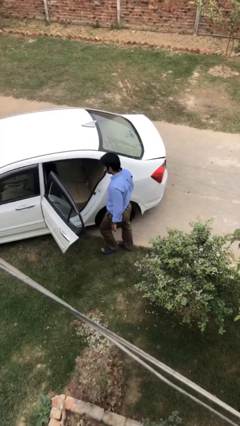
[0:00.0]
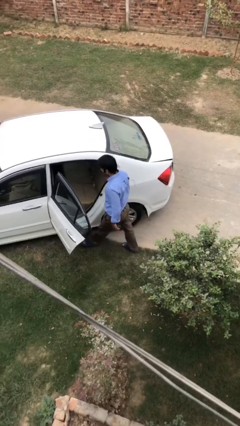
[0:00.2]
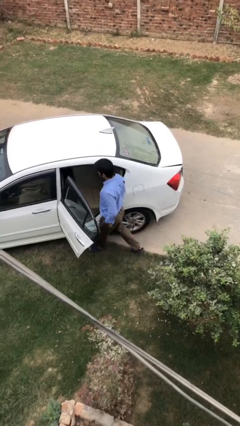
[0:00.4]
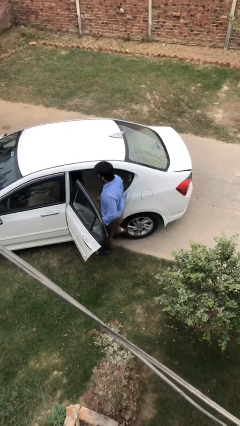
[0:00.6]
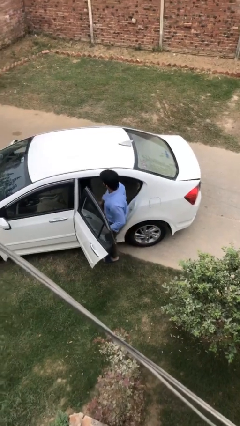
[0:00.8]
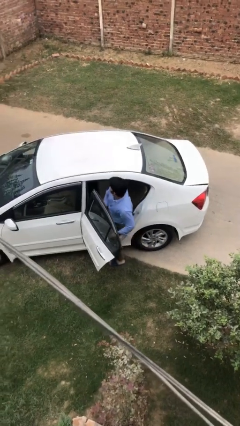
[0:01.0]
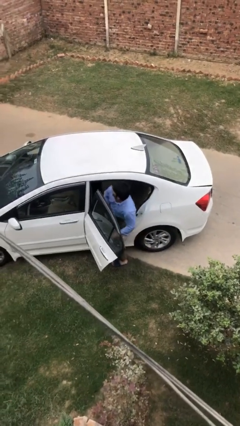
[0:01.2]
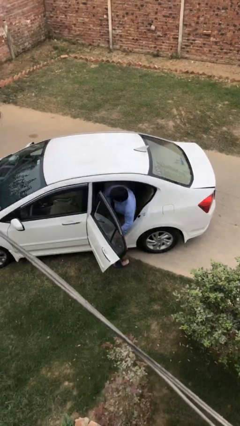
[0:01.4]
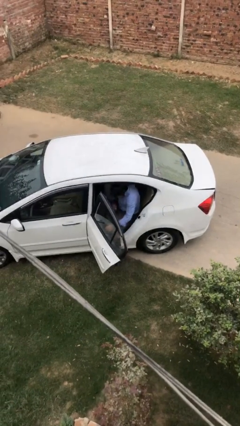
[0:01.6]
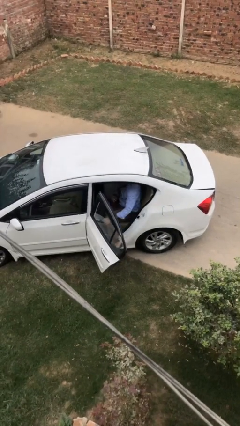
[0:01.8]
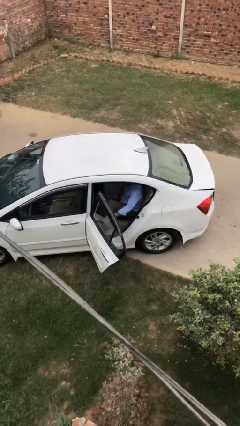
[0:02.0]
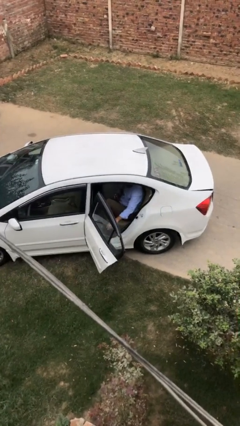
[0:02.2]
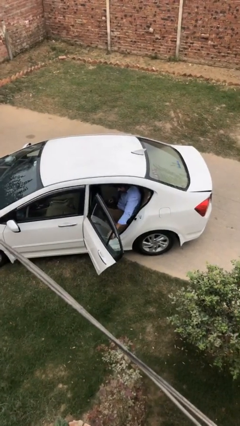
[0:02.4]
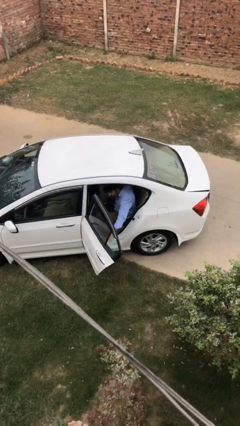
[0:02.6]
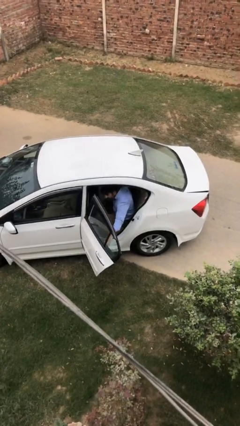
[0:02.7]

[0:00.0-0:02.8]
person enters car

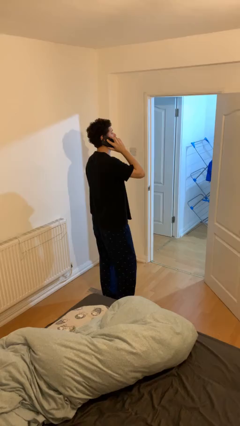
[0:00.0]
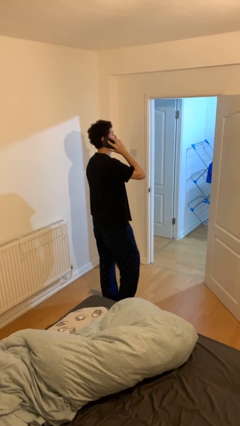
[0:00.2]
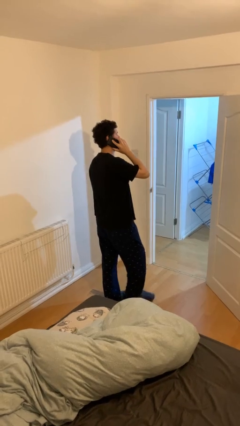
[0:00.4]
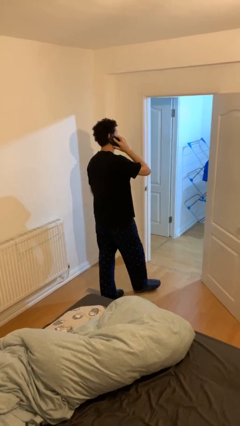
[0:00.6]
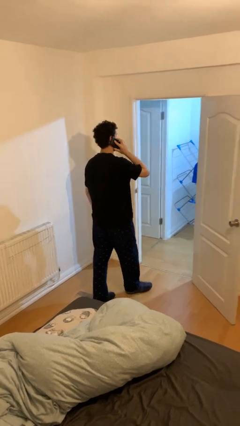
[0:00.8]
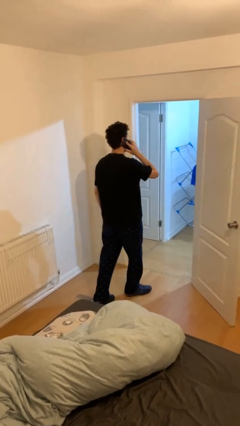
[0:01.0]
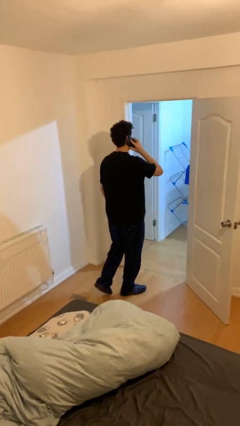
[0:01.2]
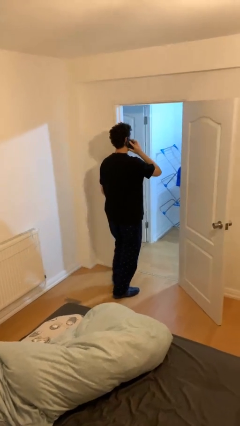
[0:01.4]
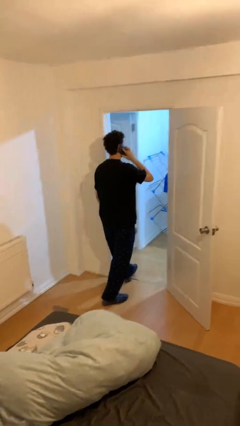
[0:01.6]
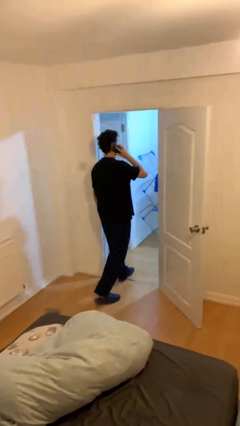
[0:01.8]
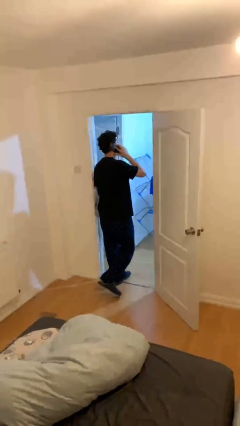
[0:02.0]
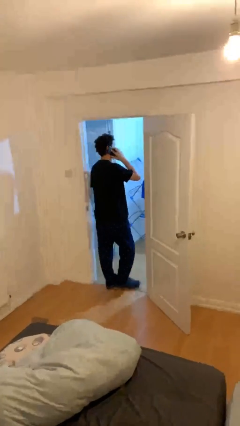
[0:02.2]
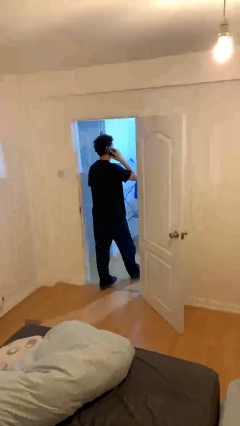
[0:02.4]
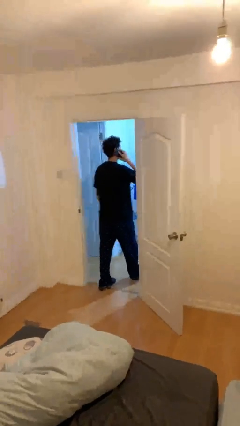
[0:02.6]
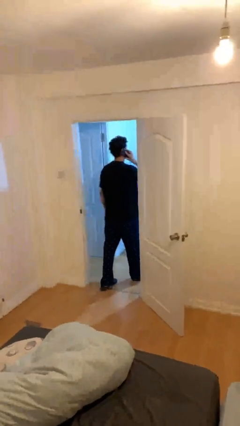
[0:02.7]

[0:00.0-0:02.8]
person exits scene through structure

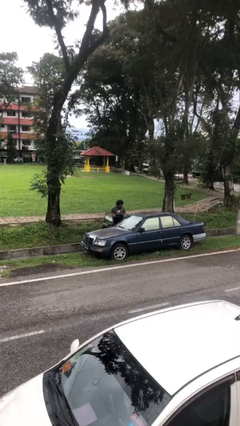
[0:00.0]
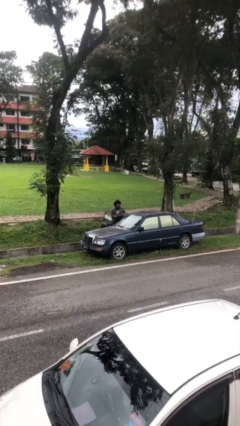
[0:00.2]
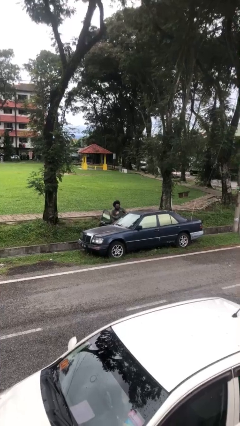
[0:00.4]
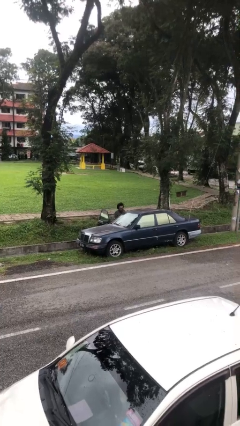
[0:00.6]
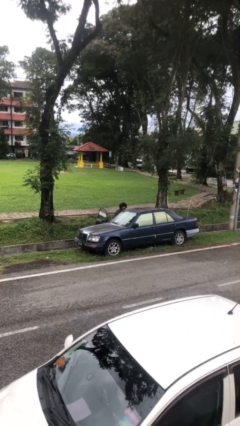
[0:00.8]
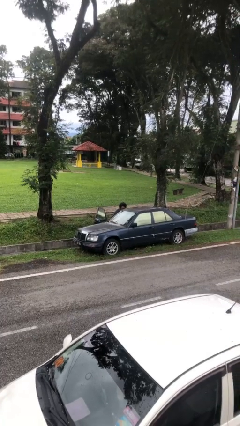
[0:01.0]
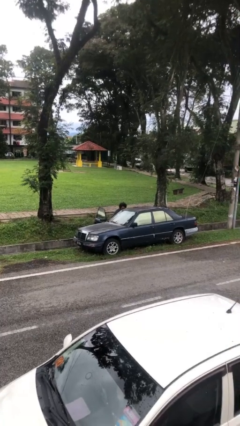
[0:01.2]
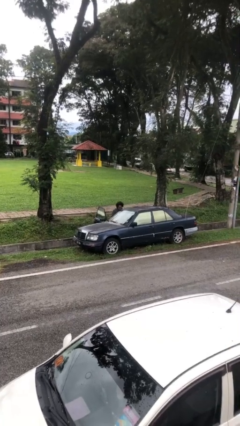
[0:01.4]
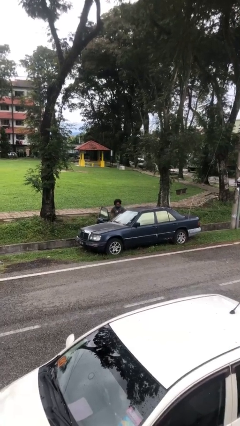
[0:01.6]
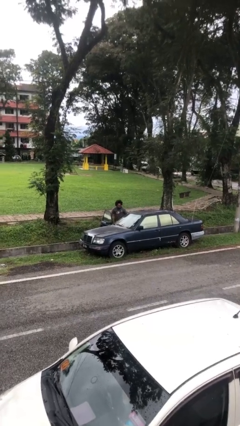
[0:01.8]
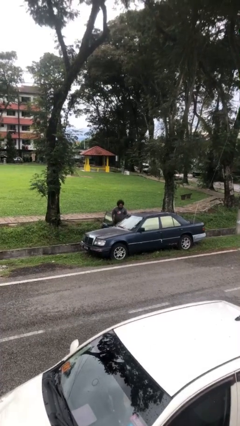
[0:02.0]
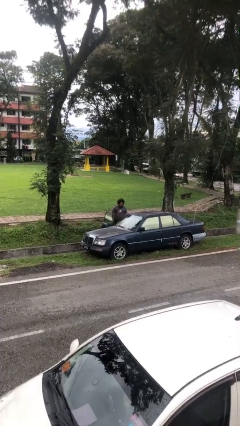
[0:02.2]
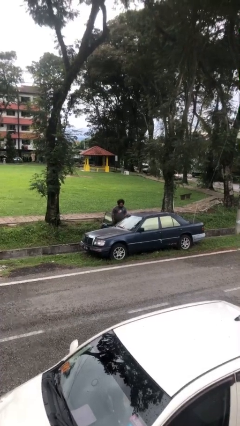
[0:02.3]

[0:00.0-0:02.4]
person loads car

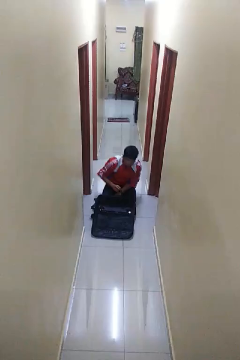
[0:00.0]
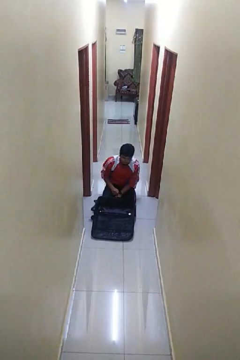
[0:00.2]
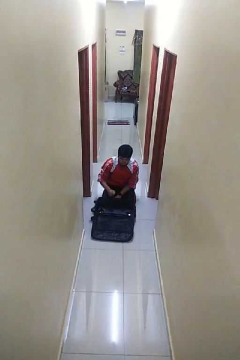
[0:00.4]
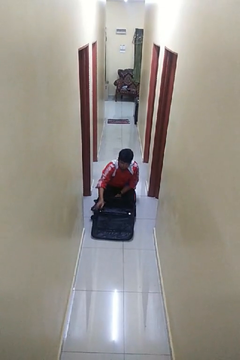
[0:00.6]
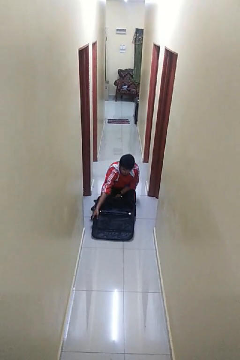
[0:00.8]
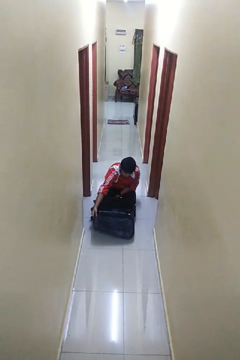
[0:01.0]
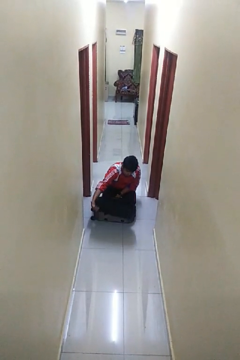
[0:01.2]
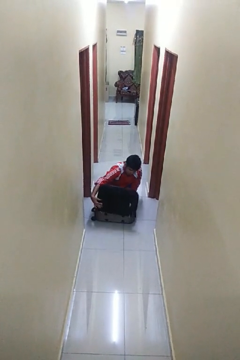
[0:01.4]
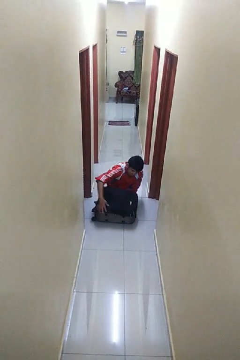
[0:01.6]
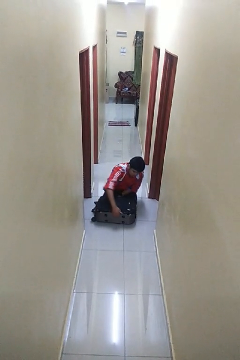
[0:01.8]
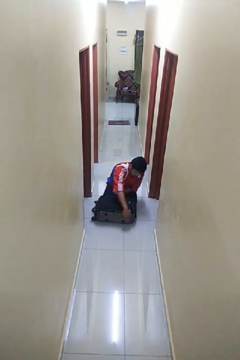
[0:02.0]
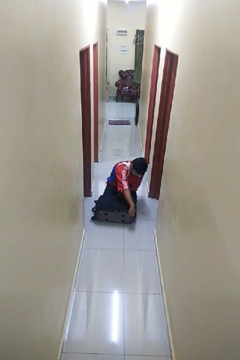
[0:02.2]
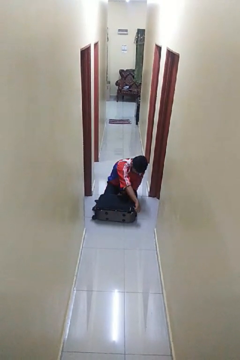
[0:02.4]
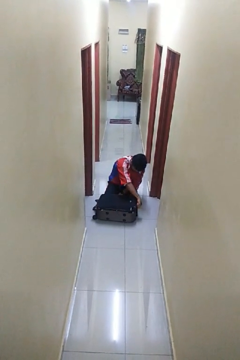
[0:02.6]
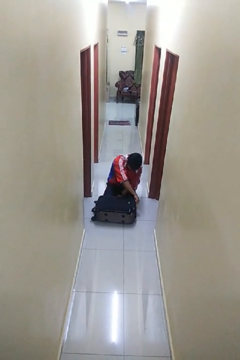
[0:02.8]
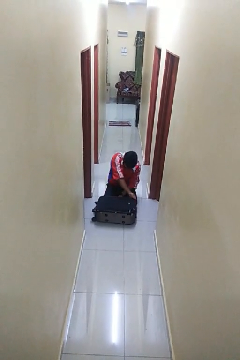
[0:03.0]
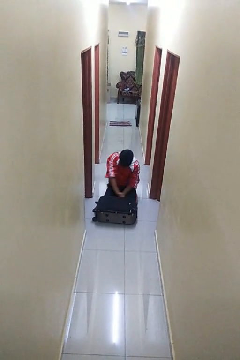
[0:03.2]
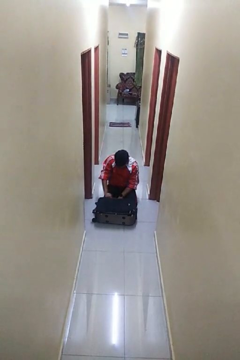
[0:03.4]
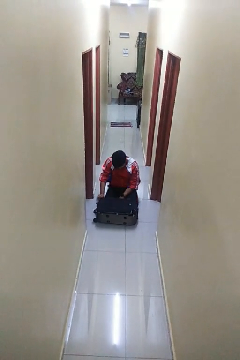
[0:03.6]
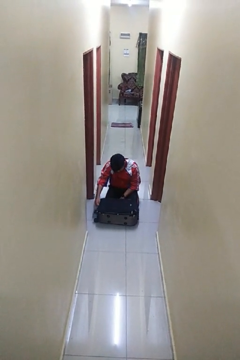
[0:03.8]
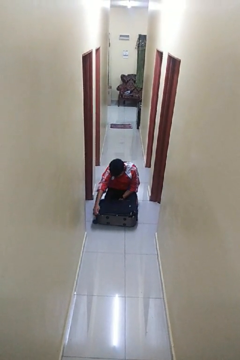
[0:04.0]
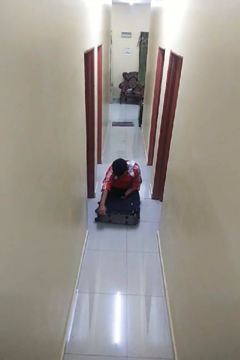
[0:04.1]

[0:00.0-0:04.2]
person closes suitcase

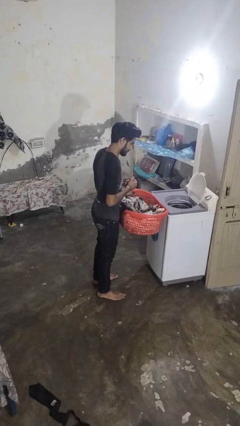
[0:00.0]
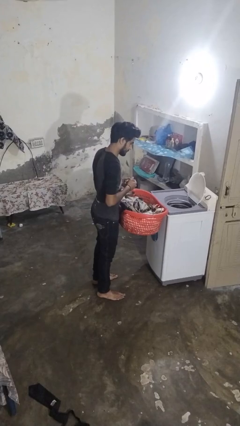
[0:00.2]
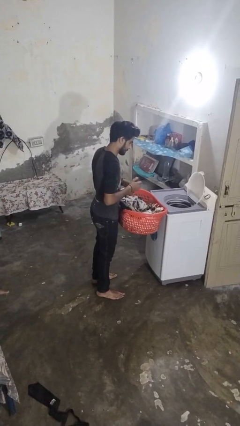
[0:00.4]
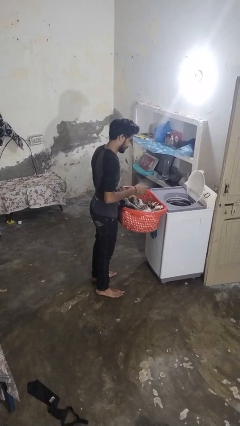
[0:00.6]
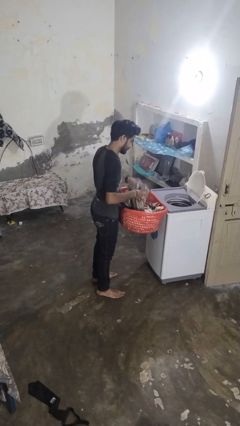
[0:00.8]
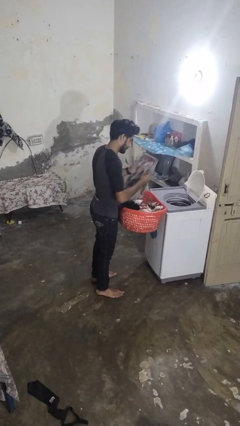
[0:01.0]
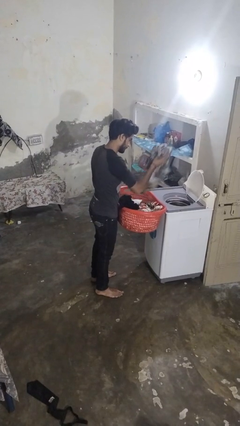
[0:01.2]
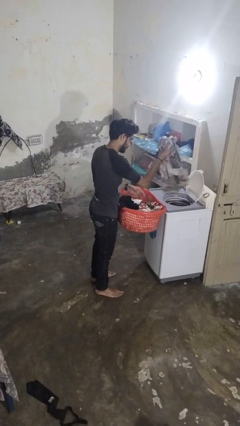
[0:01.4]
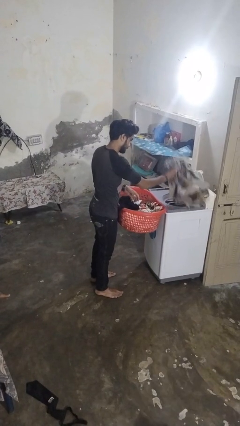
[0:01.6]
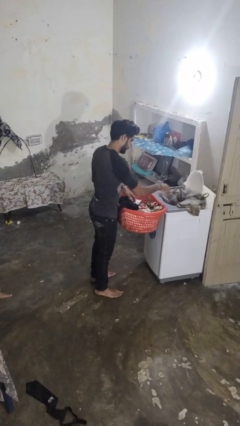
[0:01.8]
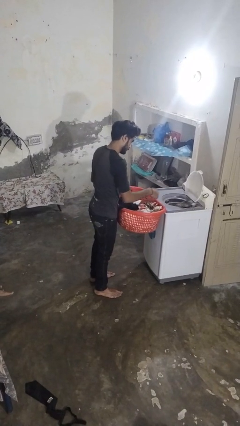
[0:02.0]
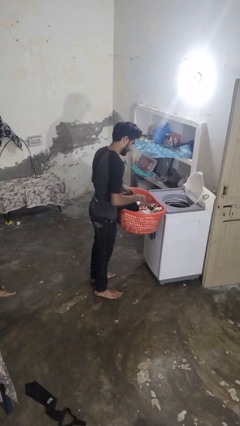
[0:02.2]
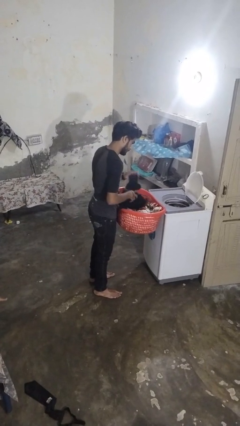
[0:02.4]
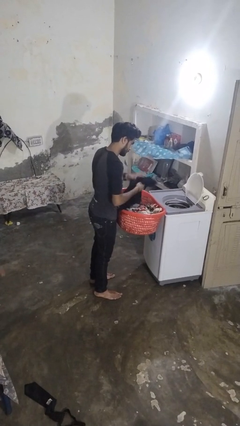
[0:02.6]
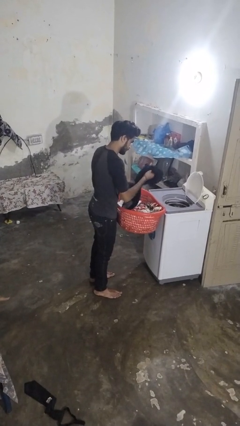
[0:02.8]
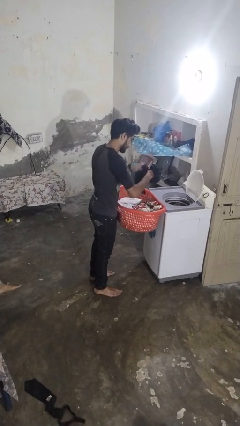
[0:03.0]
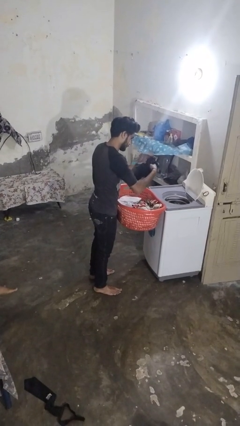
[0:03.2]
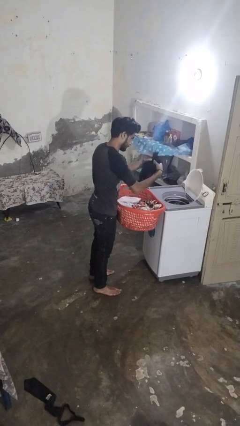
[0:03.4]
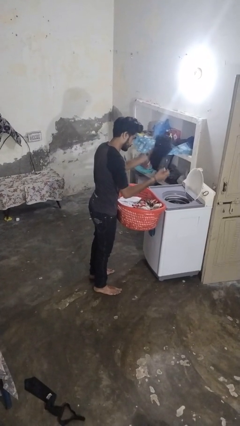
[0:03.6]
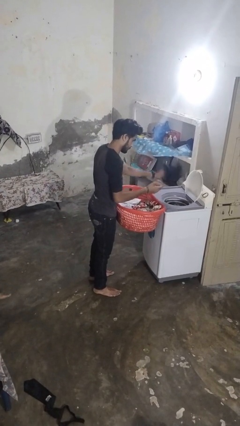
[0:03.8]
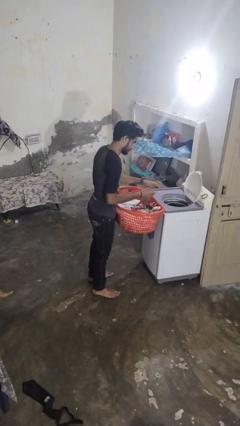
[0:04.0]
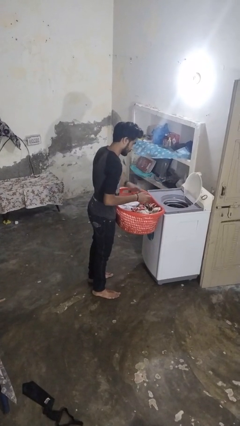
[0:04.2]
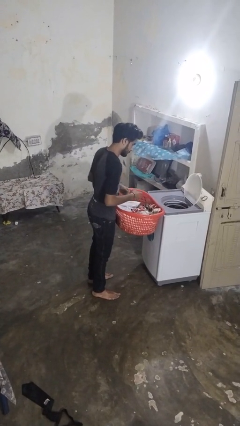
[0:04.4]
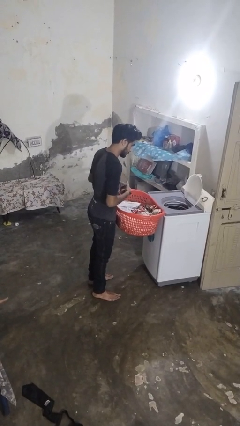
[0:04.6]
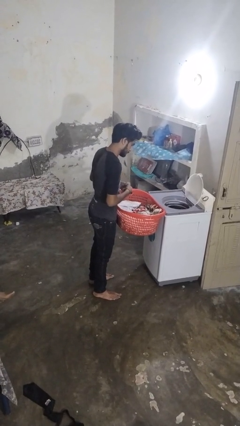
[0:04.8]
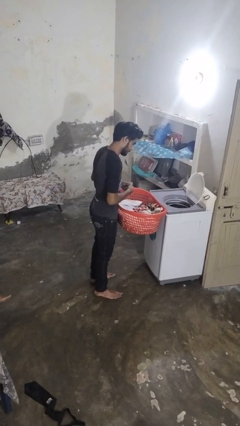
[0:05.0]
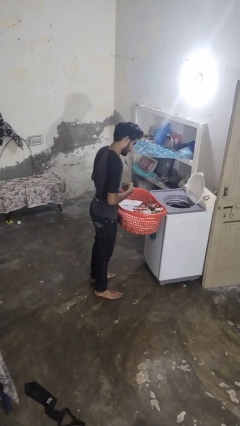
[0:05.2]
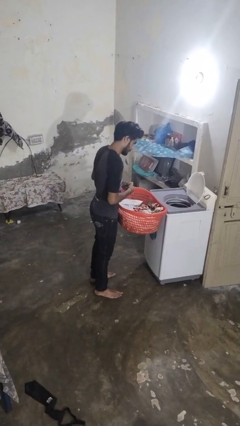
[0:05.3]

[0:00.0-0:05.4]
person loads dryer

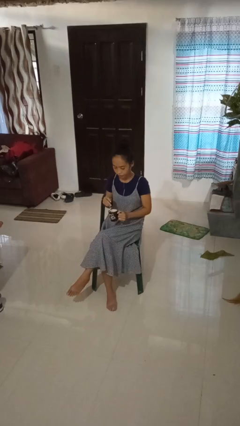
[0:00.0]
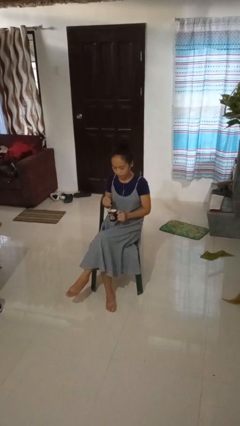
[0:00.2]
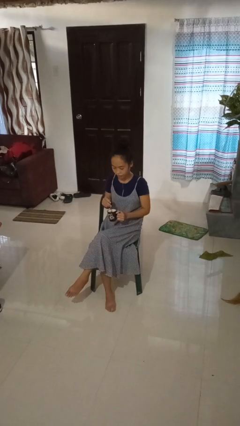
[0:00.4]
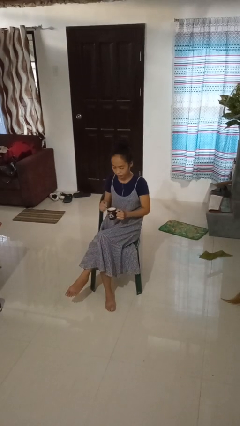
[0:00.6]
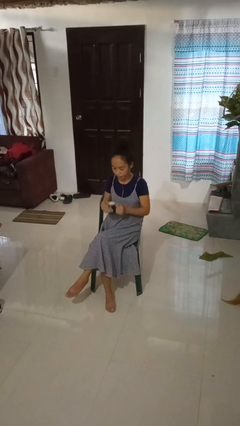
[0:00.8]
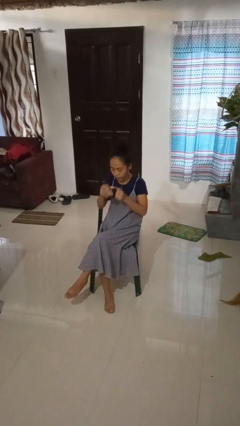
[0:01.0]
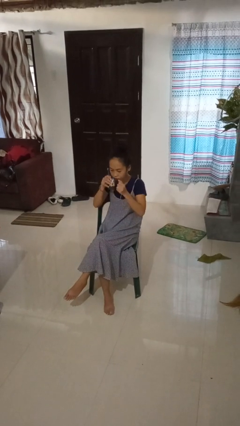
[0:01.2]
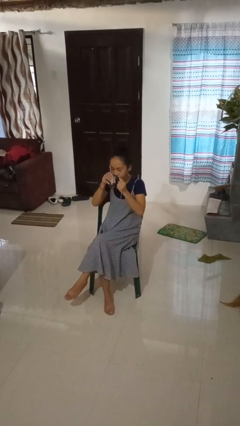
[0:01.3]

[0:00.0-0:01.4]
person stirs mug
